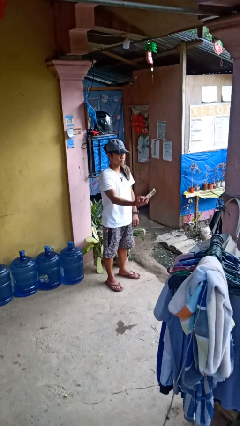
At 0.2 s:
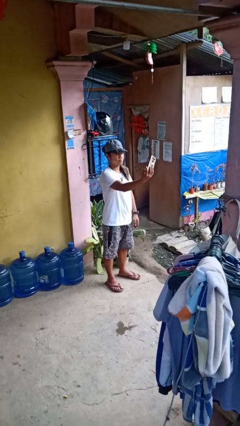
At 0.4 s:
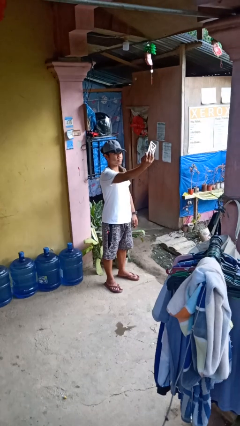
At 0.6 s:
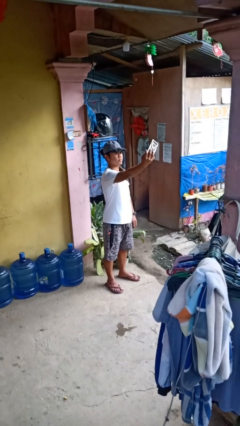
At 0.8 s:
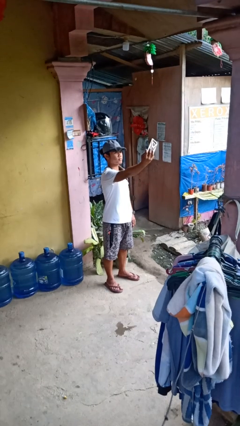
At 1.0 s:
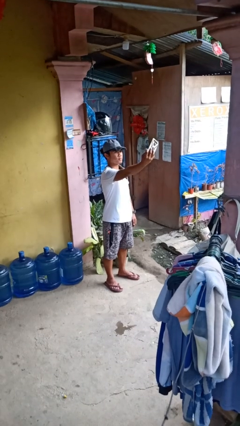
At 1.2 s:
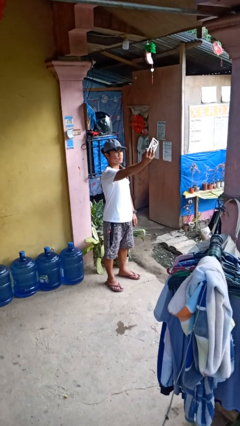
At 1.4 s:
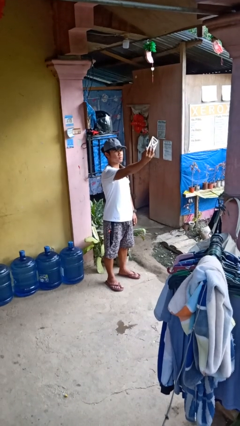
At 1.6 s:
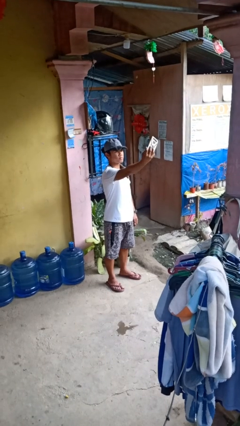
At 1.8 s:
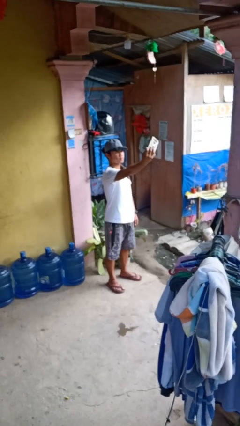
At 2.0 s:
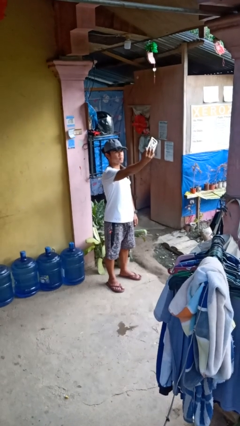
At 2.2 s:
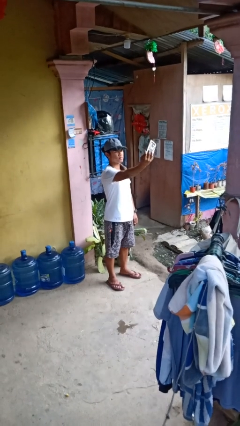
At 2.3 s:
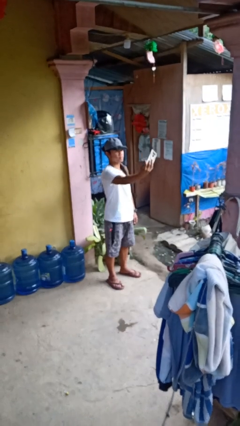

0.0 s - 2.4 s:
person takes selfie

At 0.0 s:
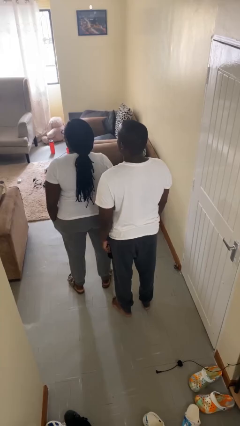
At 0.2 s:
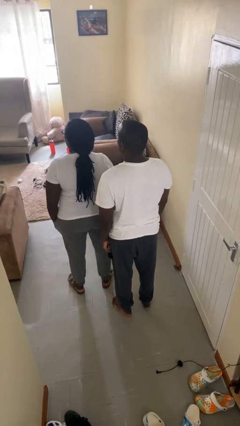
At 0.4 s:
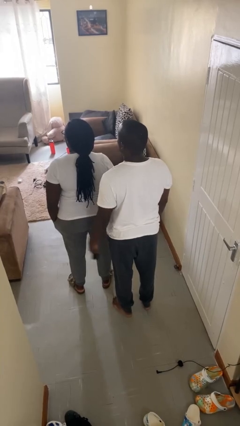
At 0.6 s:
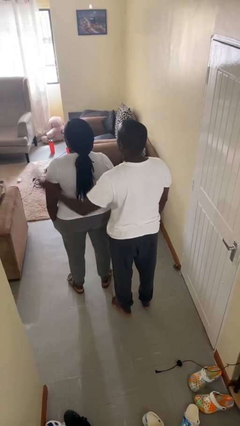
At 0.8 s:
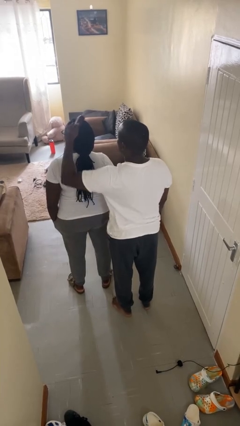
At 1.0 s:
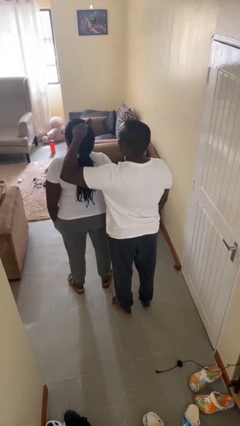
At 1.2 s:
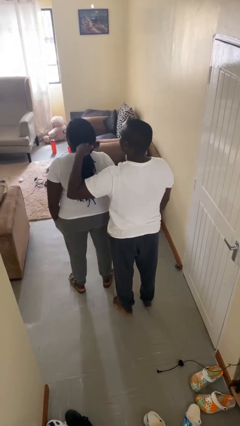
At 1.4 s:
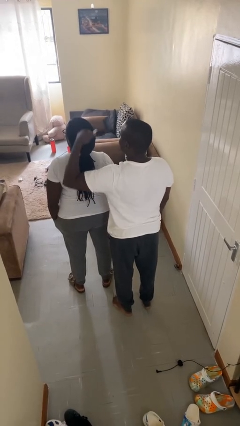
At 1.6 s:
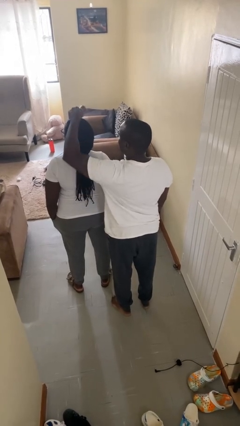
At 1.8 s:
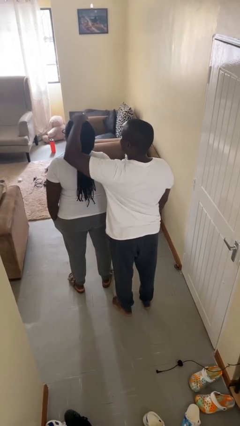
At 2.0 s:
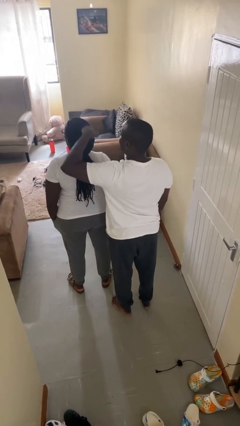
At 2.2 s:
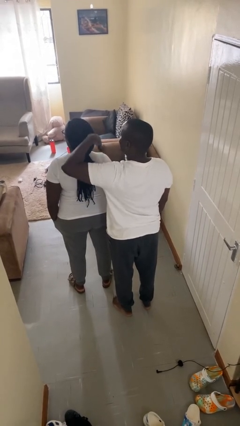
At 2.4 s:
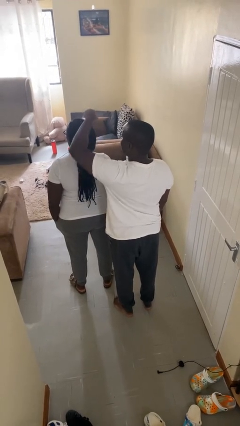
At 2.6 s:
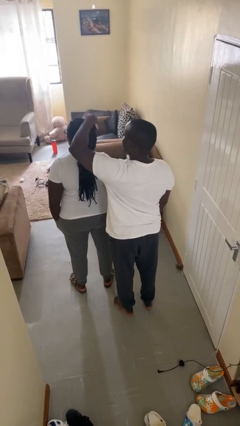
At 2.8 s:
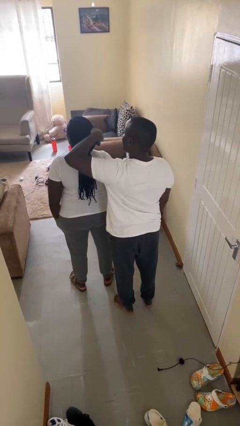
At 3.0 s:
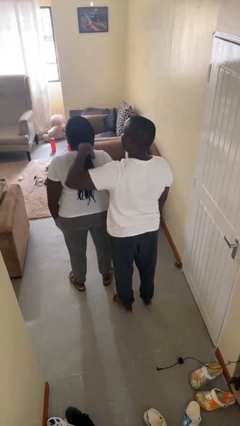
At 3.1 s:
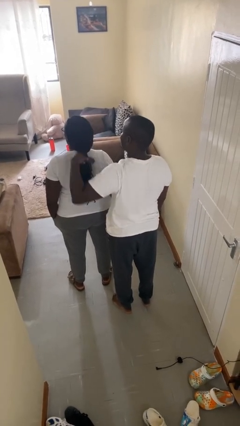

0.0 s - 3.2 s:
person brushes hair of person

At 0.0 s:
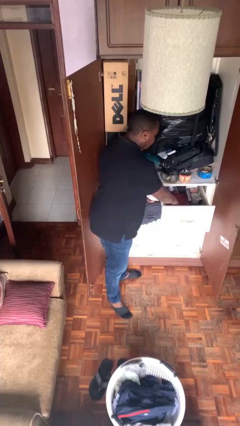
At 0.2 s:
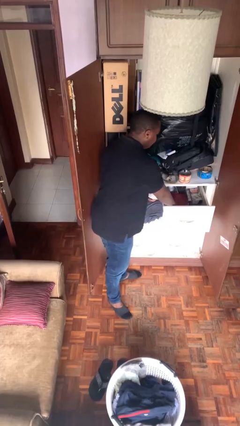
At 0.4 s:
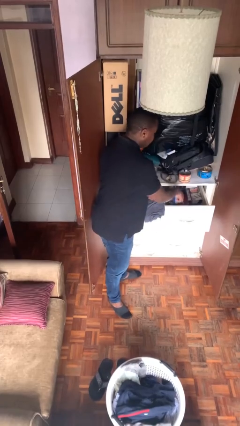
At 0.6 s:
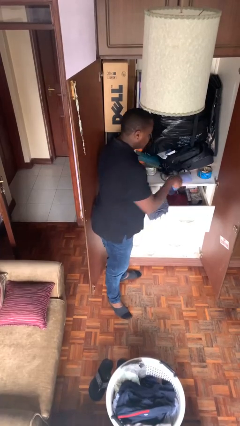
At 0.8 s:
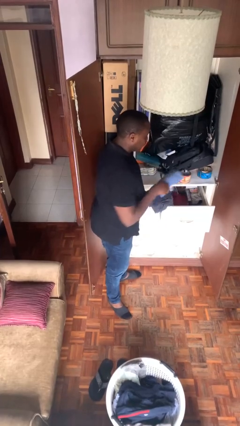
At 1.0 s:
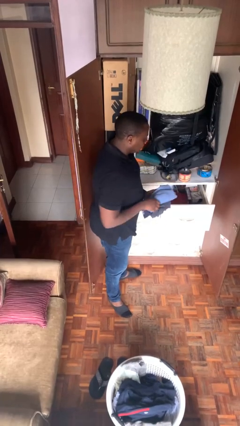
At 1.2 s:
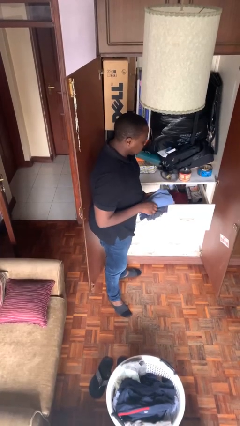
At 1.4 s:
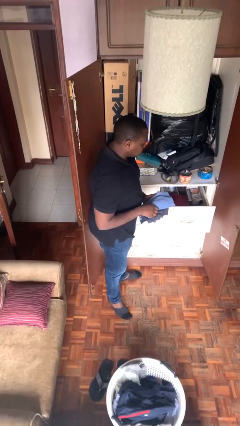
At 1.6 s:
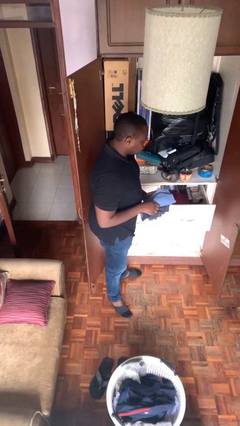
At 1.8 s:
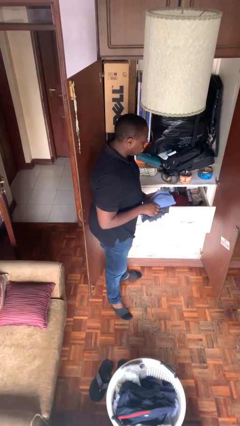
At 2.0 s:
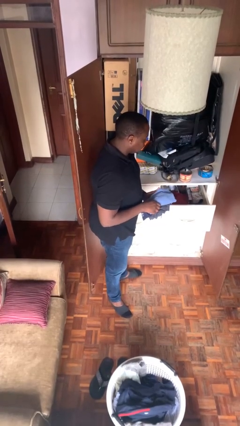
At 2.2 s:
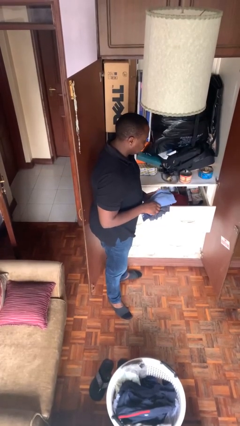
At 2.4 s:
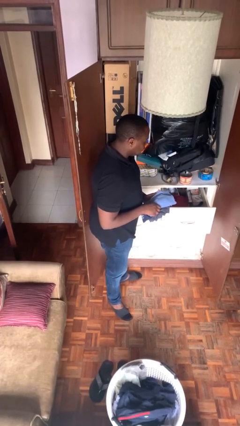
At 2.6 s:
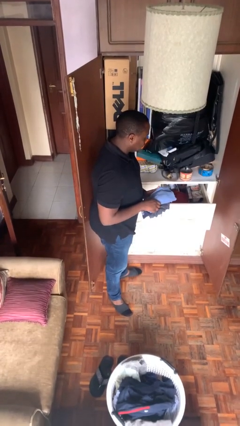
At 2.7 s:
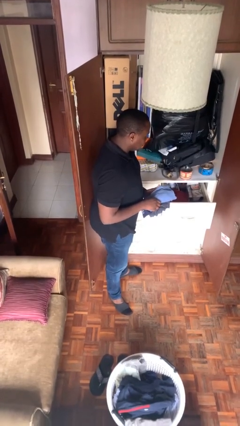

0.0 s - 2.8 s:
person takes clothes from dresser

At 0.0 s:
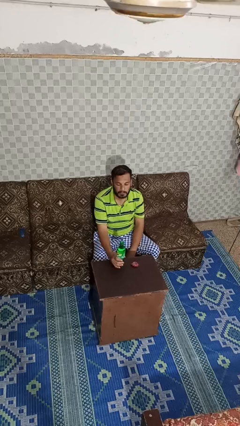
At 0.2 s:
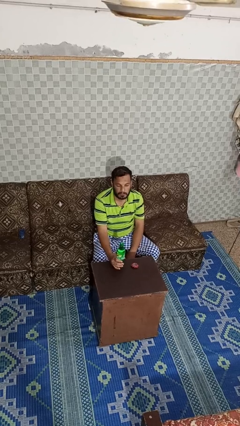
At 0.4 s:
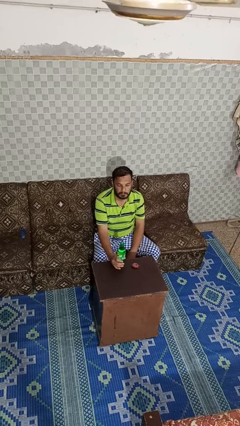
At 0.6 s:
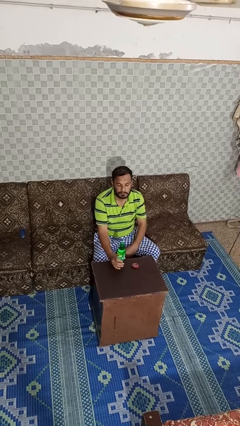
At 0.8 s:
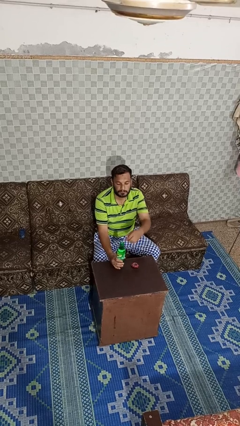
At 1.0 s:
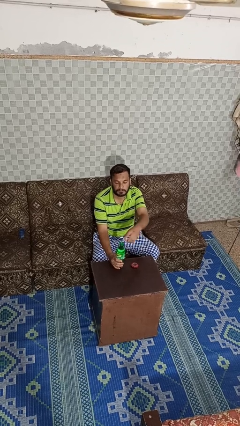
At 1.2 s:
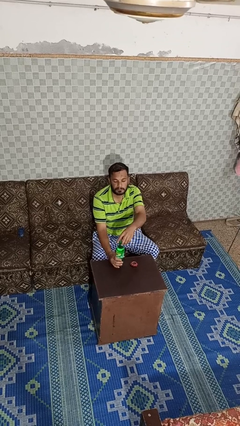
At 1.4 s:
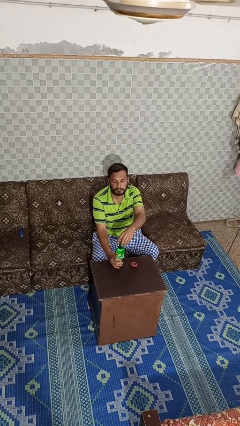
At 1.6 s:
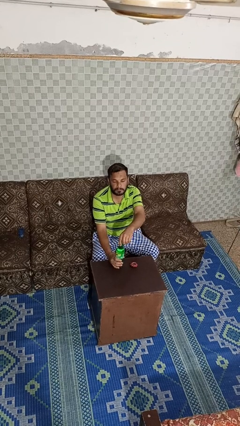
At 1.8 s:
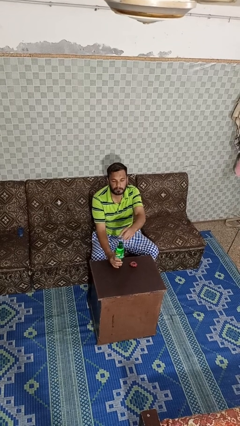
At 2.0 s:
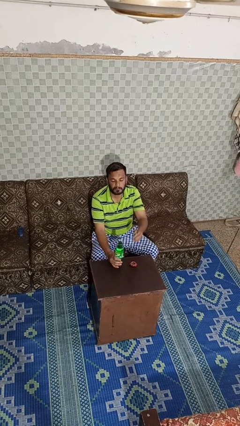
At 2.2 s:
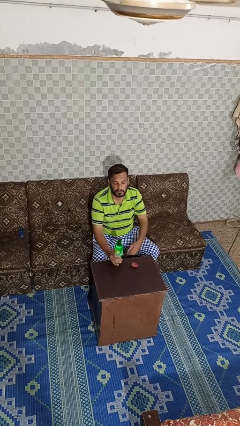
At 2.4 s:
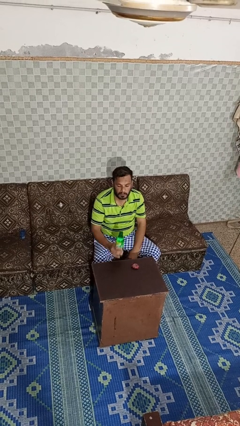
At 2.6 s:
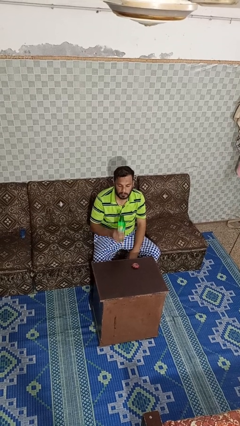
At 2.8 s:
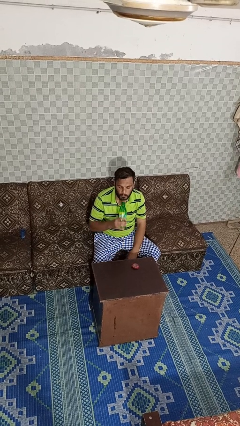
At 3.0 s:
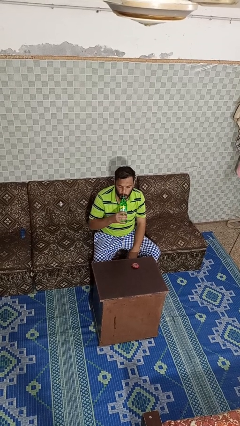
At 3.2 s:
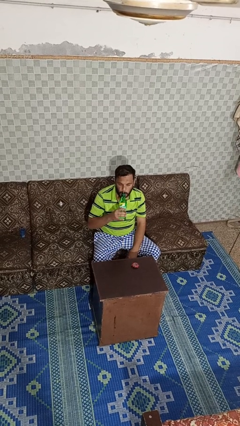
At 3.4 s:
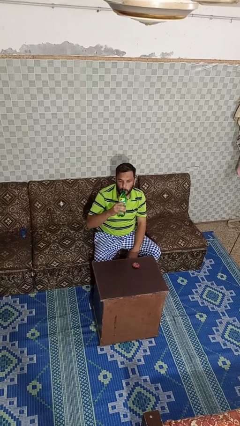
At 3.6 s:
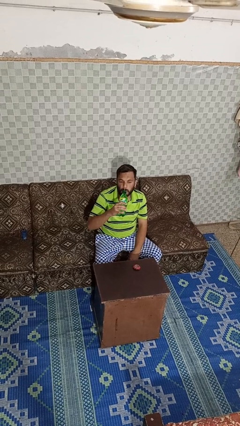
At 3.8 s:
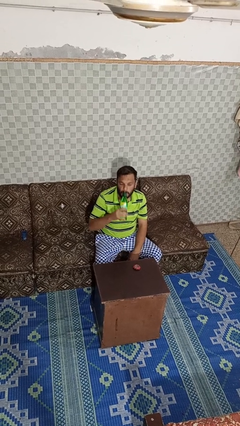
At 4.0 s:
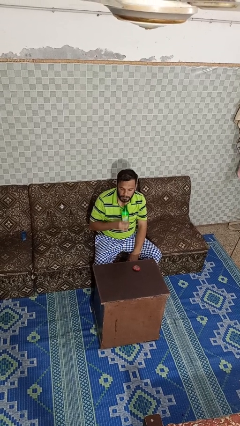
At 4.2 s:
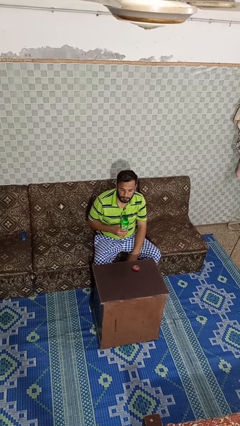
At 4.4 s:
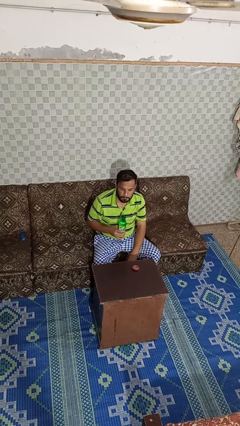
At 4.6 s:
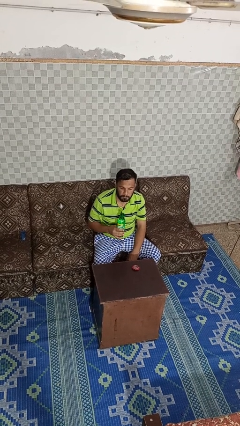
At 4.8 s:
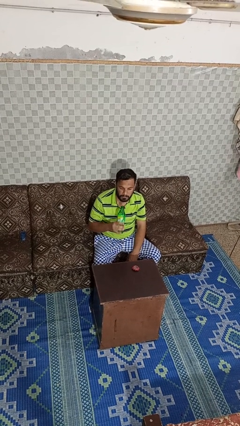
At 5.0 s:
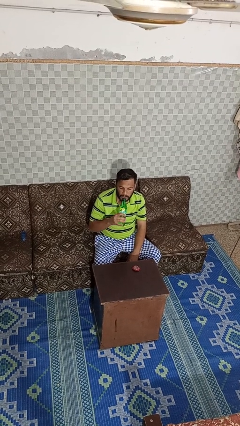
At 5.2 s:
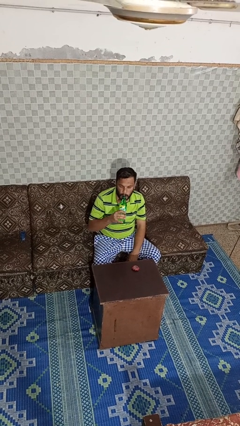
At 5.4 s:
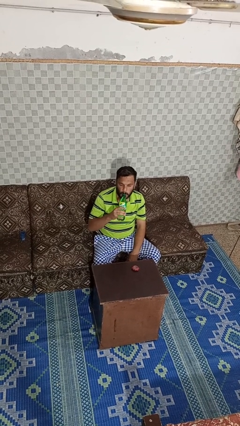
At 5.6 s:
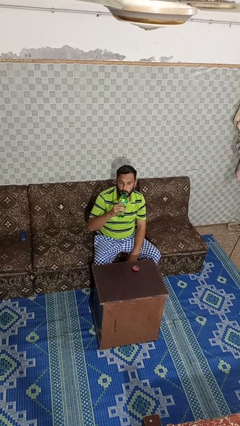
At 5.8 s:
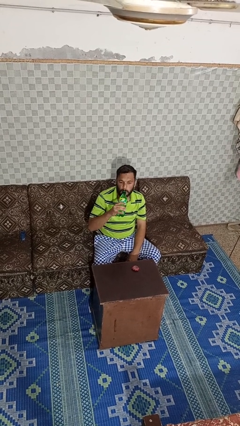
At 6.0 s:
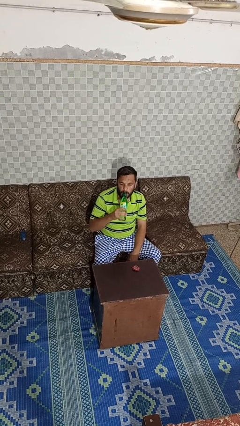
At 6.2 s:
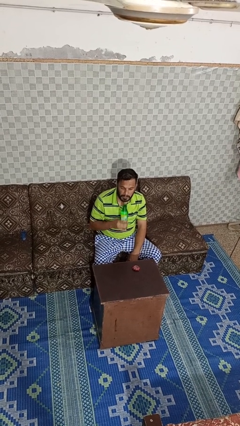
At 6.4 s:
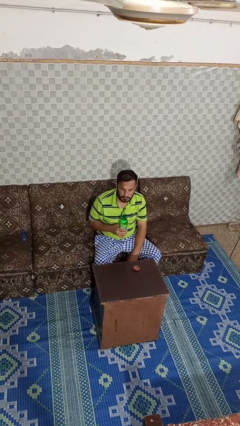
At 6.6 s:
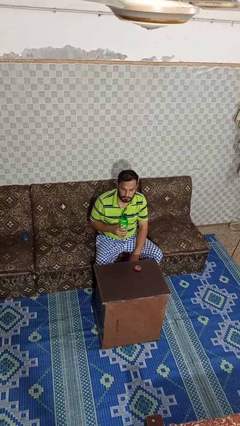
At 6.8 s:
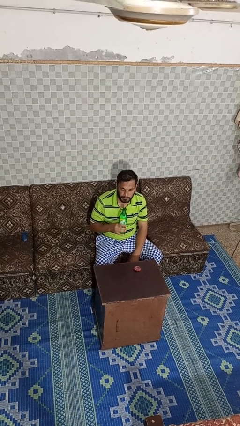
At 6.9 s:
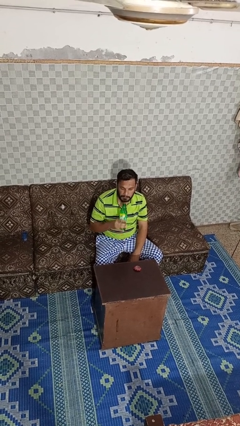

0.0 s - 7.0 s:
person drinks from bottle

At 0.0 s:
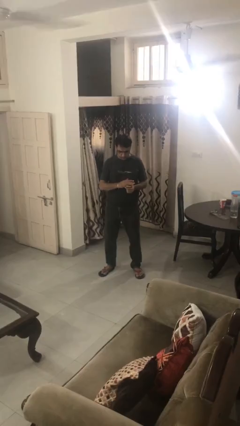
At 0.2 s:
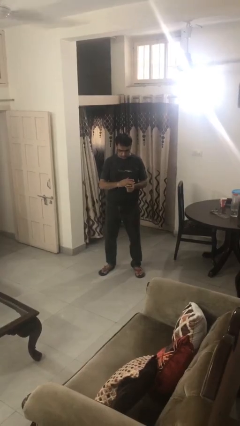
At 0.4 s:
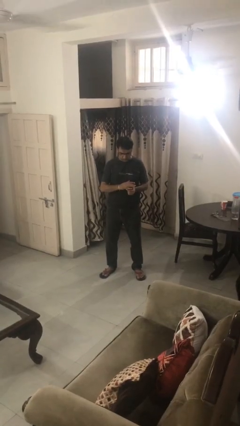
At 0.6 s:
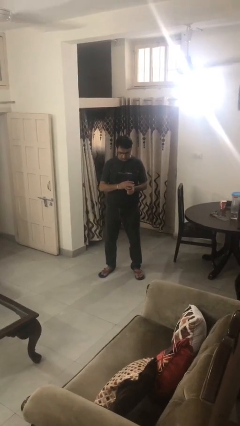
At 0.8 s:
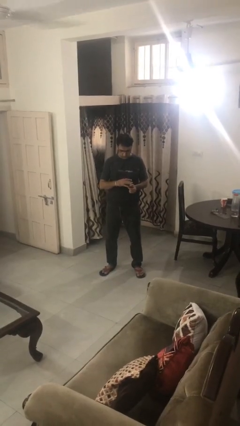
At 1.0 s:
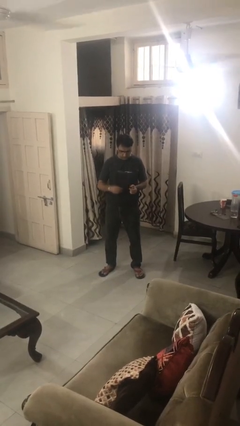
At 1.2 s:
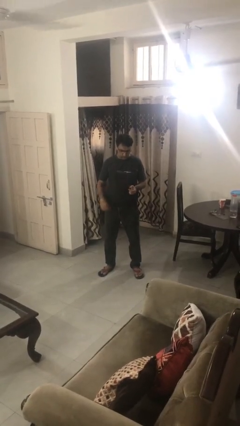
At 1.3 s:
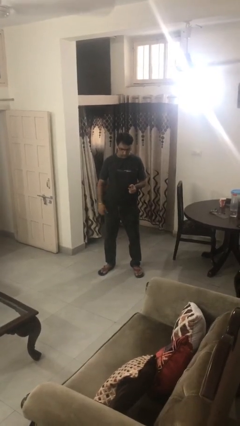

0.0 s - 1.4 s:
person takes off ring

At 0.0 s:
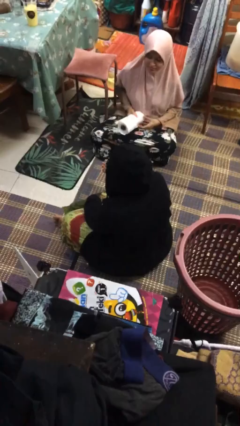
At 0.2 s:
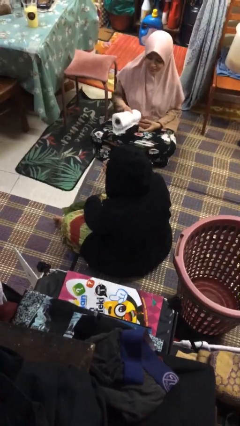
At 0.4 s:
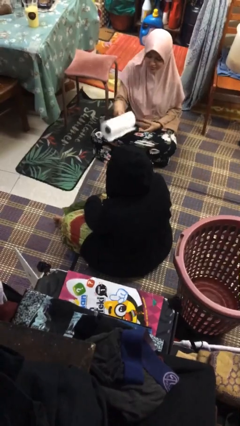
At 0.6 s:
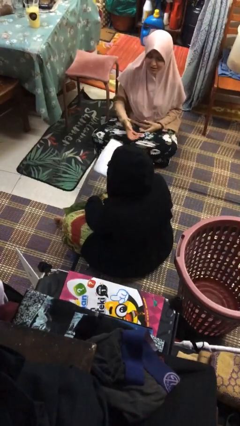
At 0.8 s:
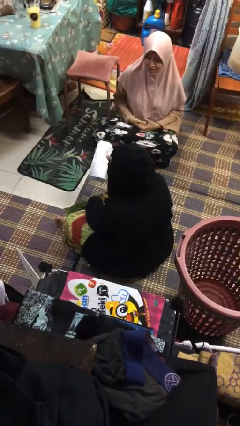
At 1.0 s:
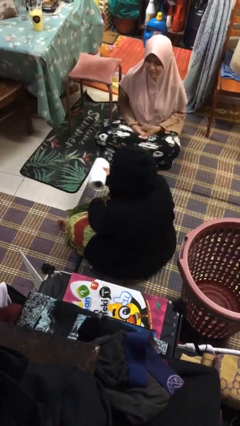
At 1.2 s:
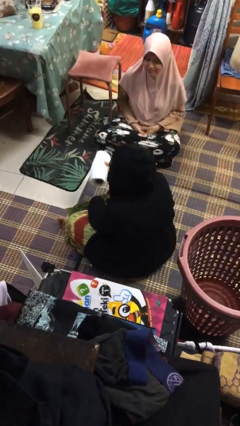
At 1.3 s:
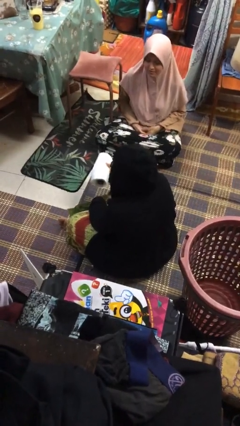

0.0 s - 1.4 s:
person catches object from person
